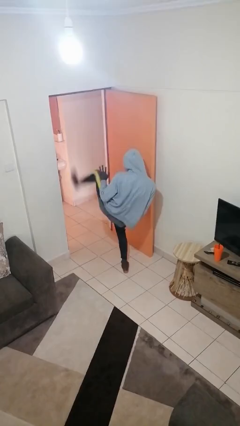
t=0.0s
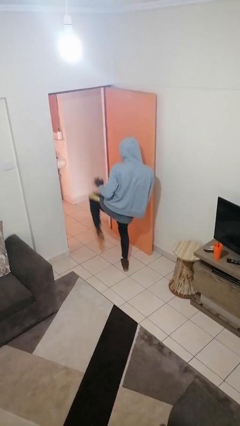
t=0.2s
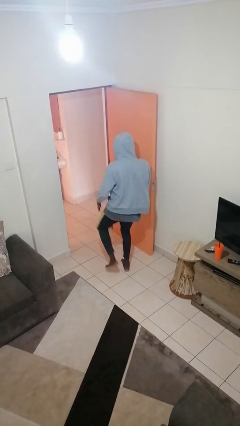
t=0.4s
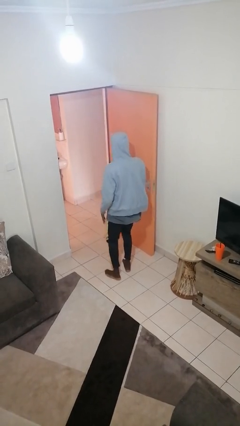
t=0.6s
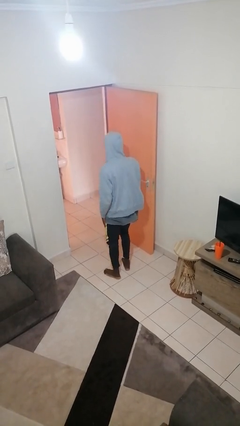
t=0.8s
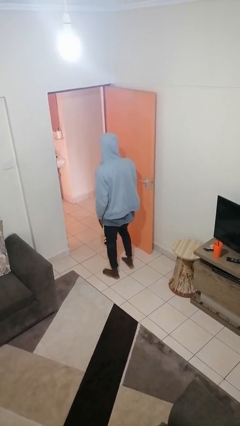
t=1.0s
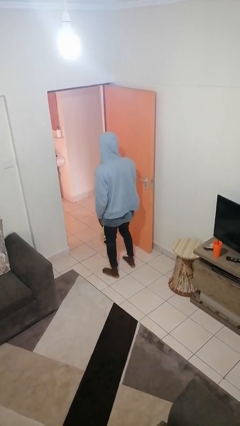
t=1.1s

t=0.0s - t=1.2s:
person karate kicks

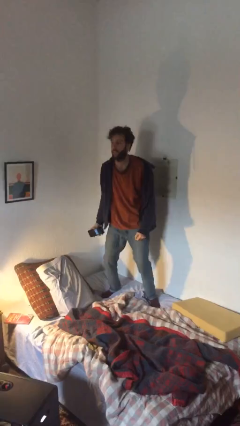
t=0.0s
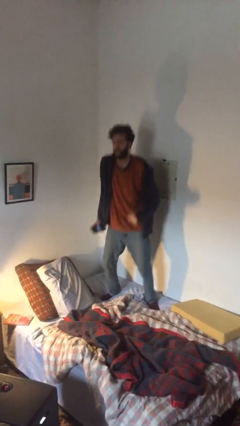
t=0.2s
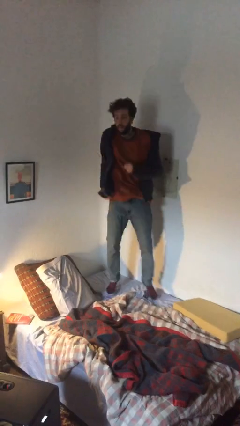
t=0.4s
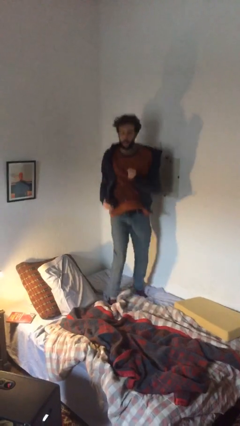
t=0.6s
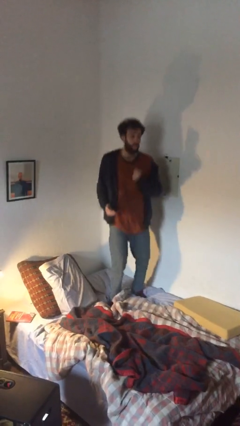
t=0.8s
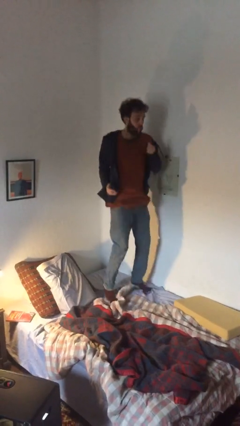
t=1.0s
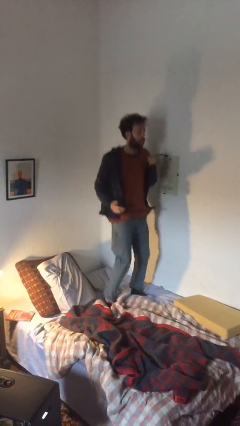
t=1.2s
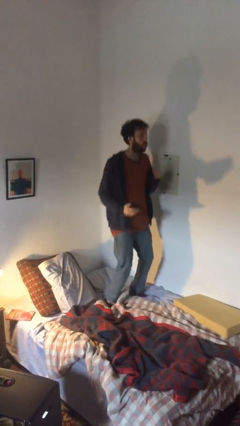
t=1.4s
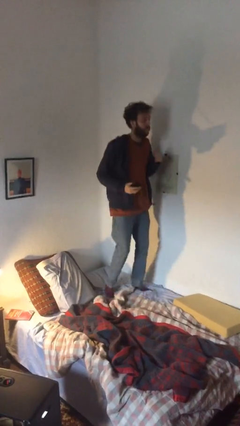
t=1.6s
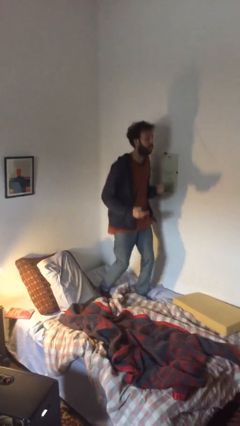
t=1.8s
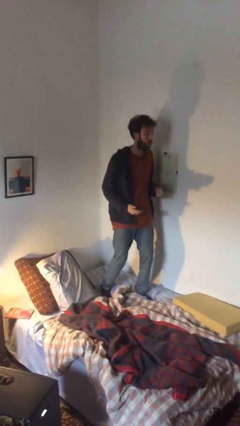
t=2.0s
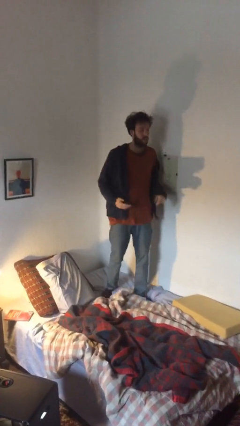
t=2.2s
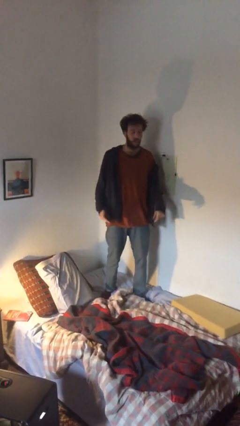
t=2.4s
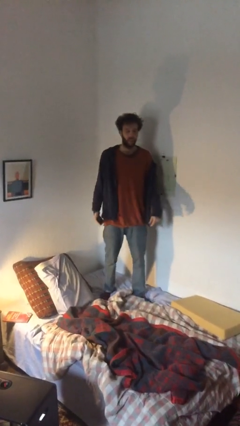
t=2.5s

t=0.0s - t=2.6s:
person jumps on bed

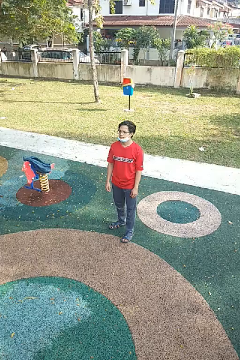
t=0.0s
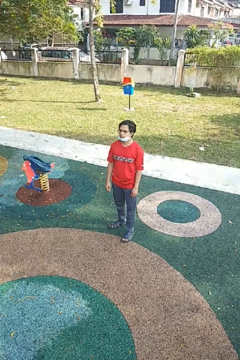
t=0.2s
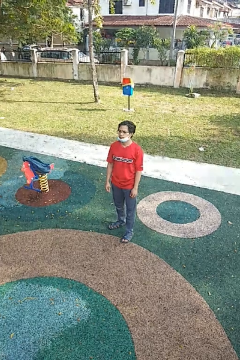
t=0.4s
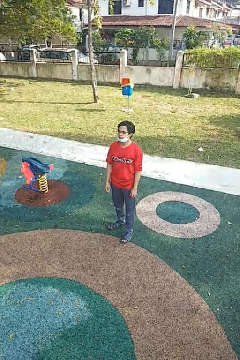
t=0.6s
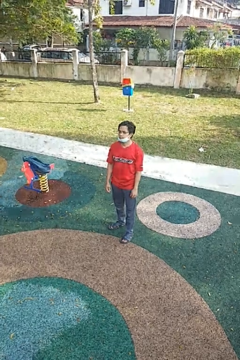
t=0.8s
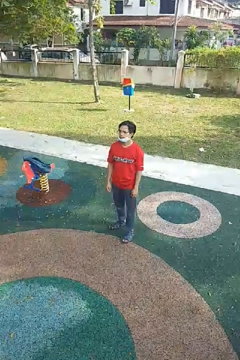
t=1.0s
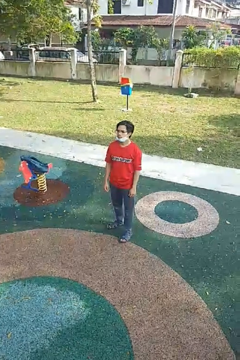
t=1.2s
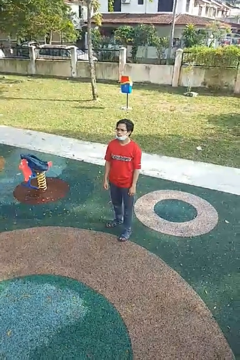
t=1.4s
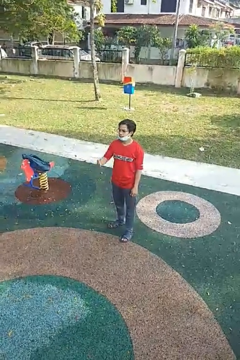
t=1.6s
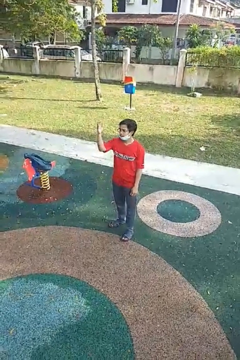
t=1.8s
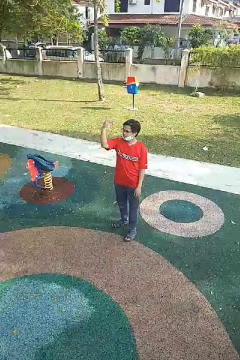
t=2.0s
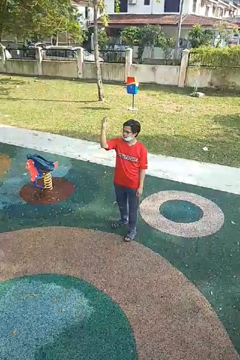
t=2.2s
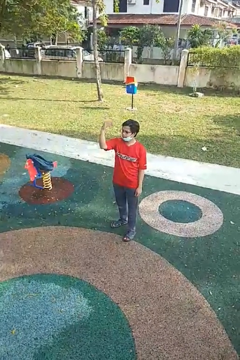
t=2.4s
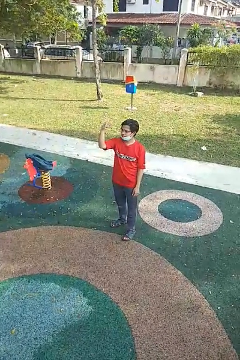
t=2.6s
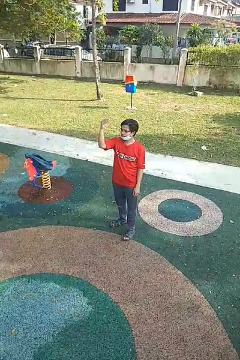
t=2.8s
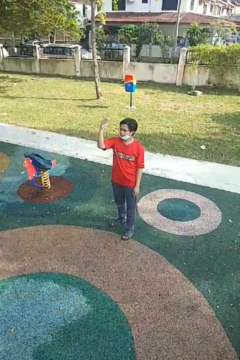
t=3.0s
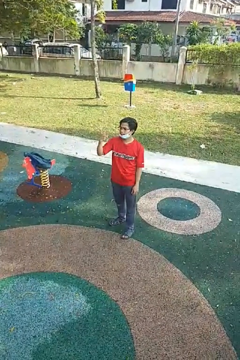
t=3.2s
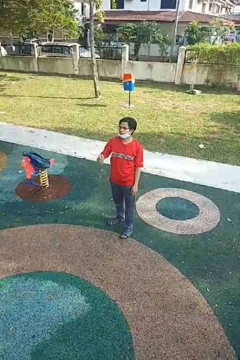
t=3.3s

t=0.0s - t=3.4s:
person gestures come here

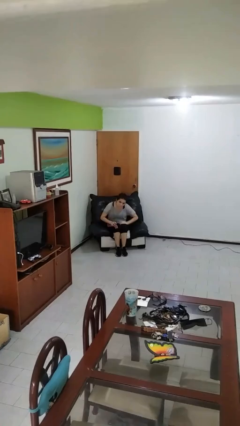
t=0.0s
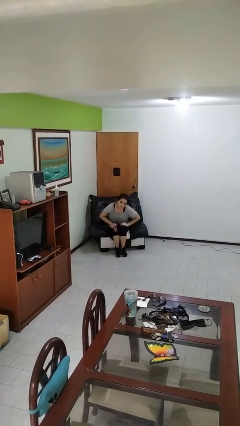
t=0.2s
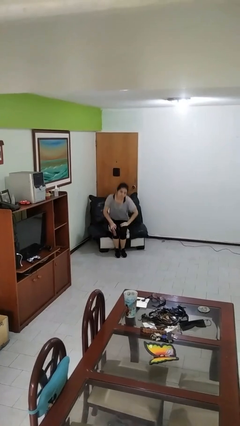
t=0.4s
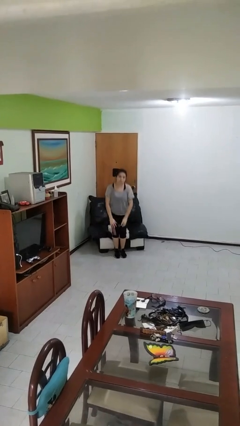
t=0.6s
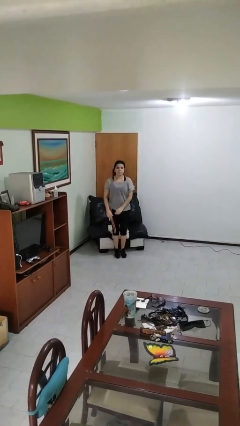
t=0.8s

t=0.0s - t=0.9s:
person stands up

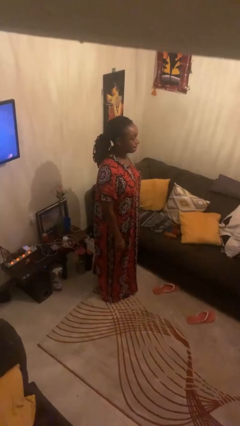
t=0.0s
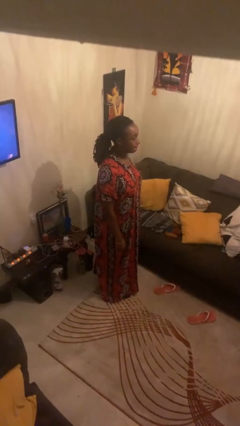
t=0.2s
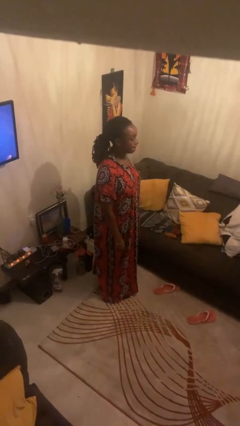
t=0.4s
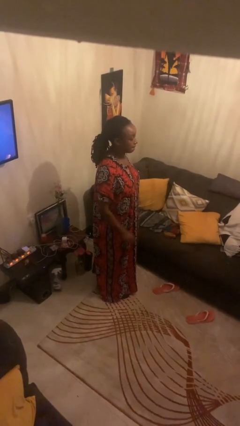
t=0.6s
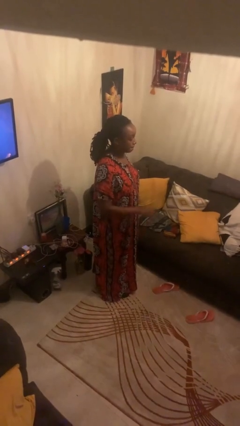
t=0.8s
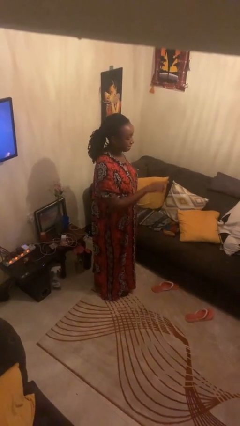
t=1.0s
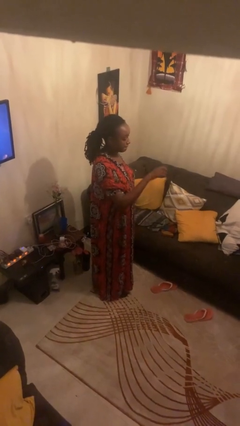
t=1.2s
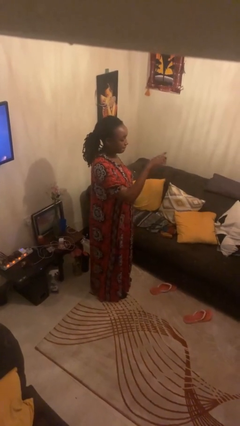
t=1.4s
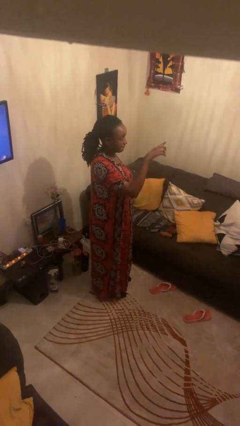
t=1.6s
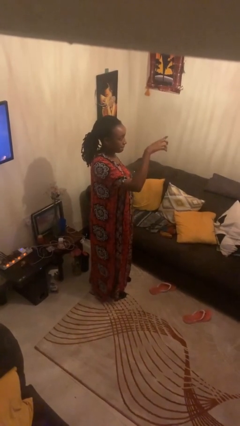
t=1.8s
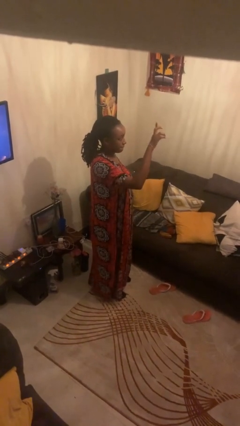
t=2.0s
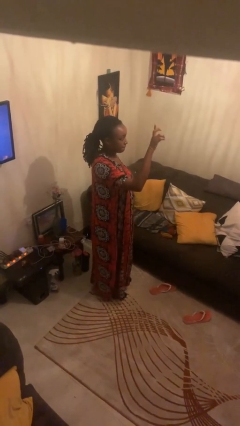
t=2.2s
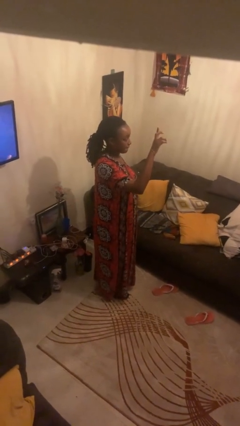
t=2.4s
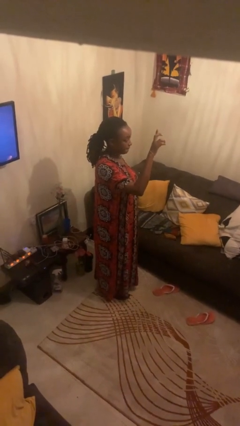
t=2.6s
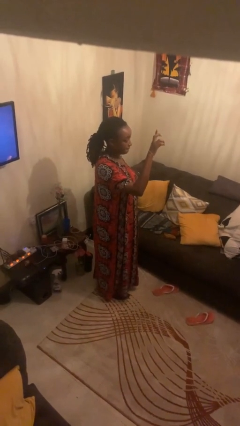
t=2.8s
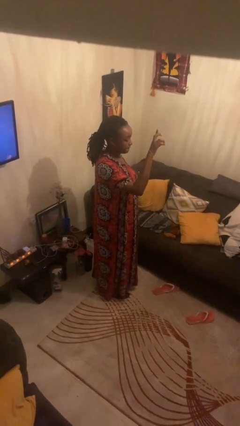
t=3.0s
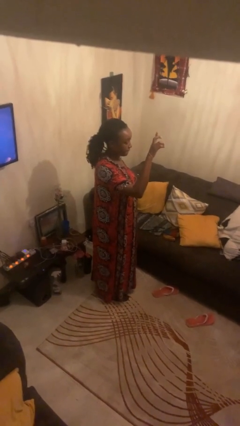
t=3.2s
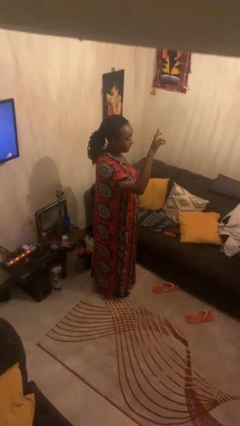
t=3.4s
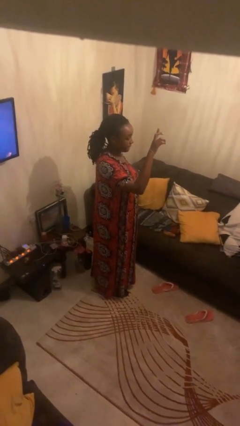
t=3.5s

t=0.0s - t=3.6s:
person gestures swipe up

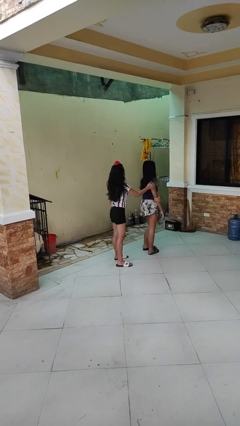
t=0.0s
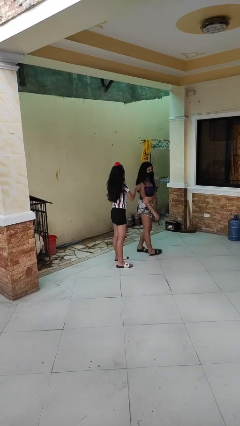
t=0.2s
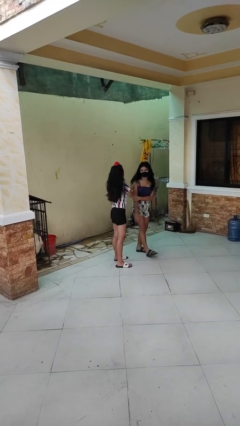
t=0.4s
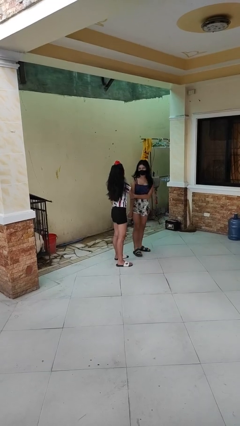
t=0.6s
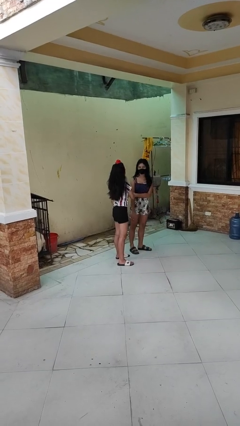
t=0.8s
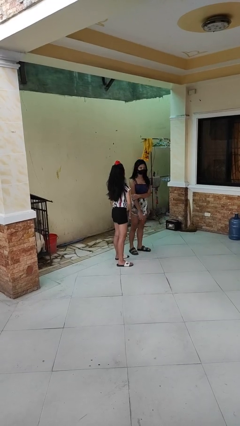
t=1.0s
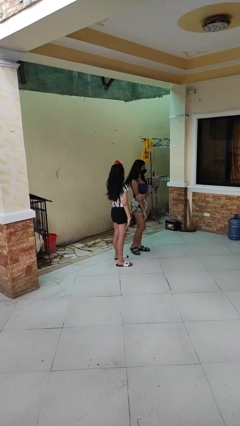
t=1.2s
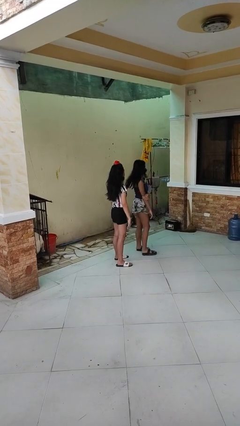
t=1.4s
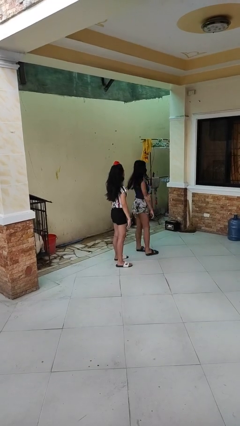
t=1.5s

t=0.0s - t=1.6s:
person spins person around

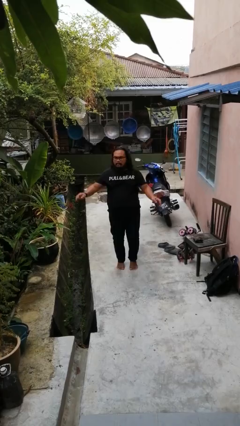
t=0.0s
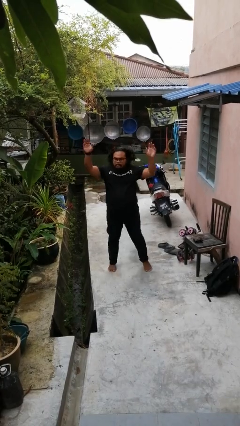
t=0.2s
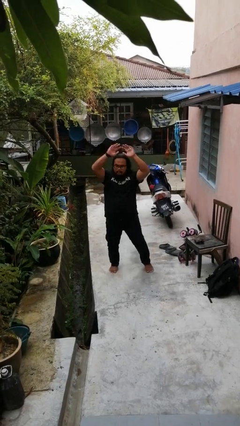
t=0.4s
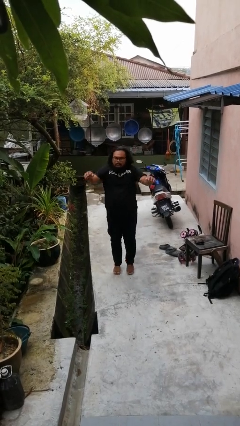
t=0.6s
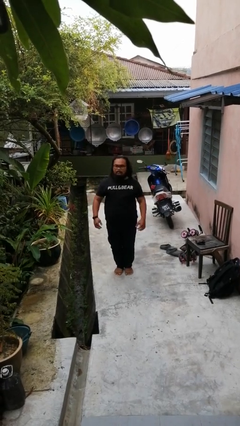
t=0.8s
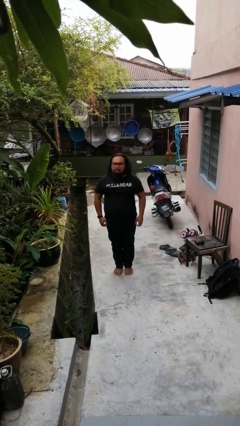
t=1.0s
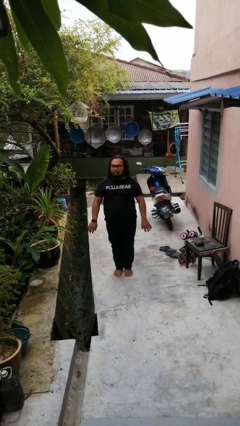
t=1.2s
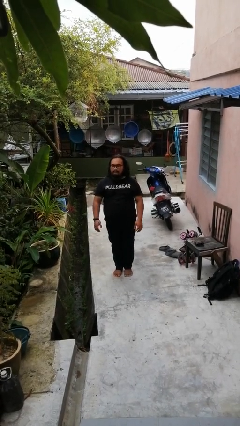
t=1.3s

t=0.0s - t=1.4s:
person exercises with jumping jacks

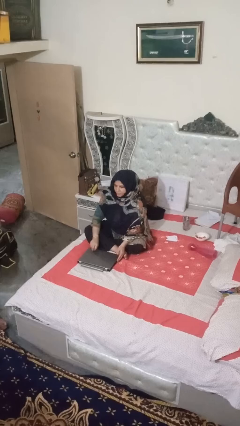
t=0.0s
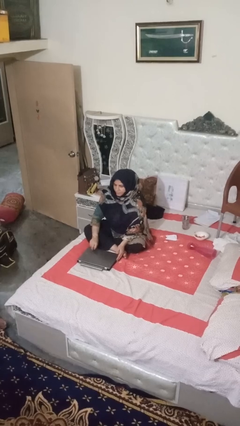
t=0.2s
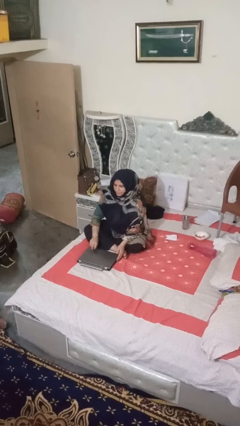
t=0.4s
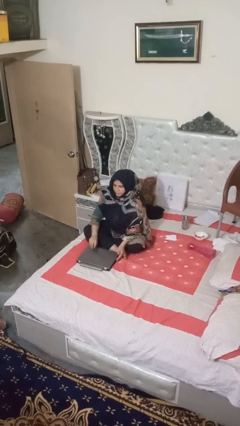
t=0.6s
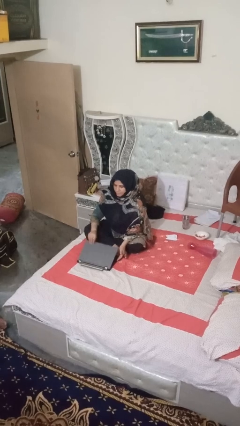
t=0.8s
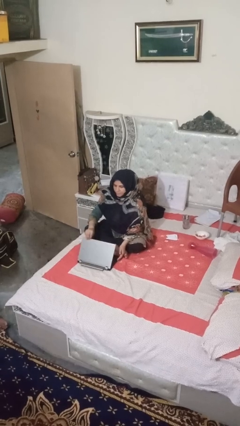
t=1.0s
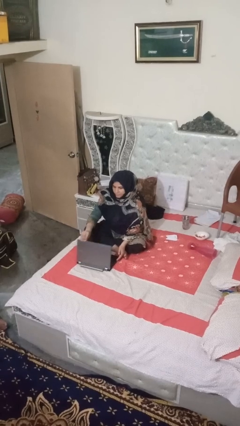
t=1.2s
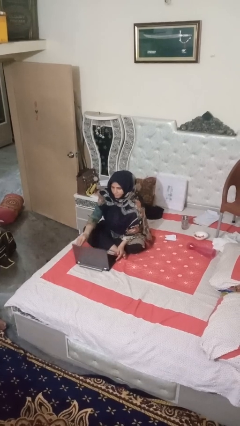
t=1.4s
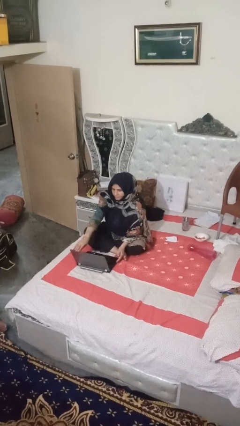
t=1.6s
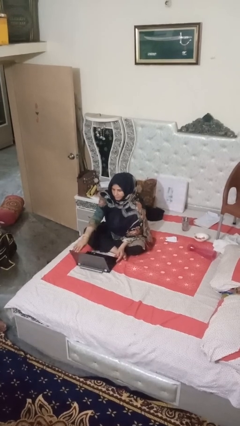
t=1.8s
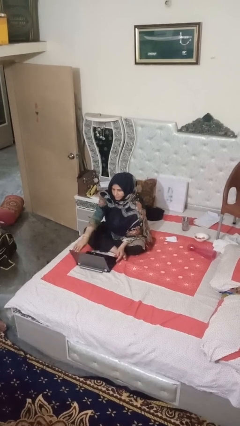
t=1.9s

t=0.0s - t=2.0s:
person opens laptop

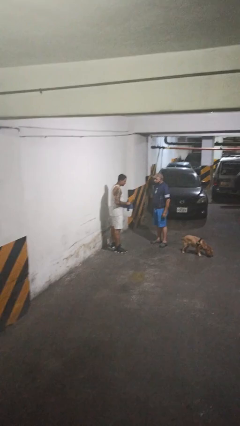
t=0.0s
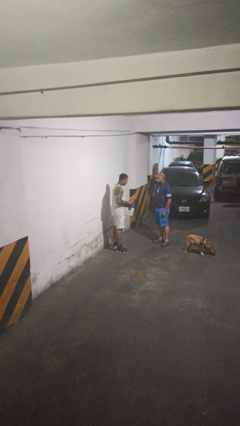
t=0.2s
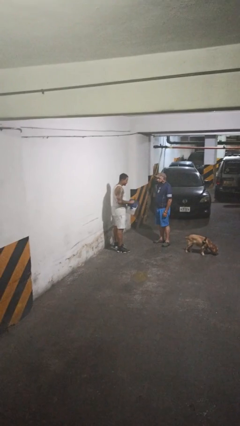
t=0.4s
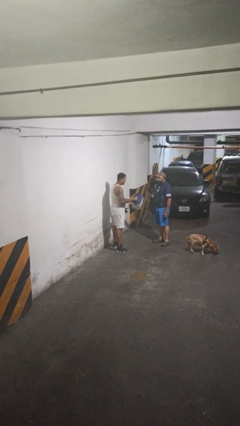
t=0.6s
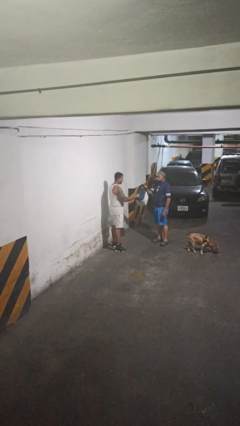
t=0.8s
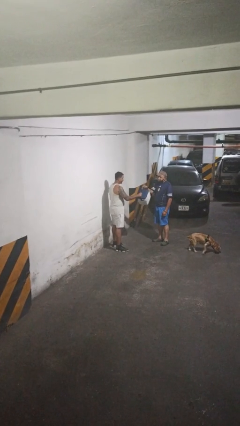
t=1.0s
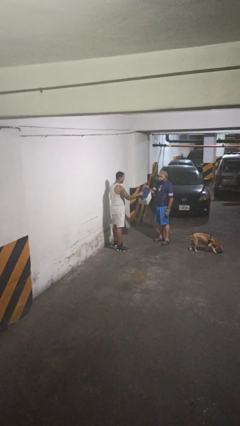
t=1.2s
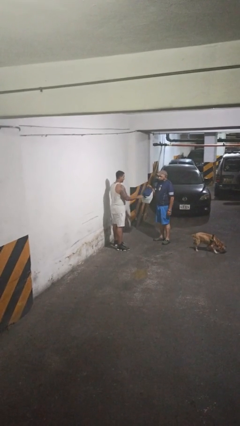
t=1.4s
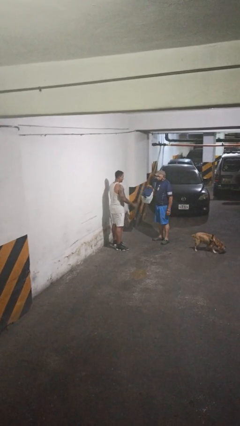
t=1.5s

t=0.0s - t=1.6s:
person transfers object to person
